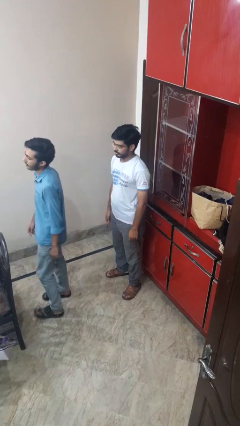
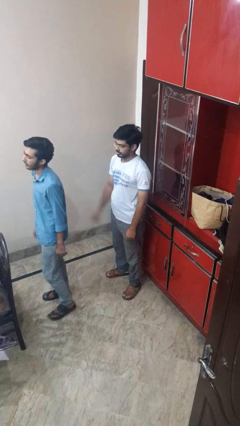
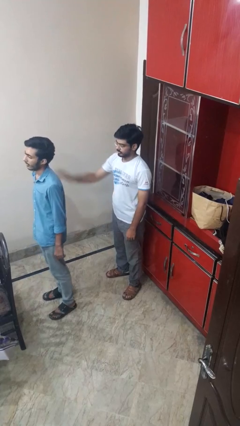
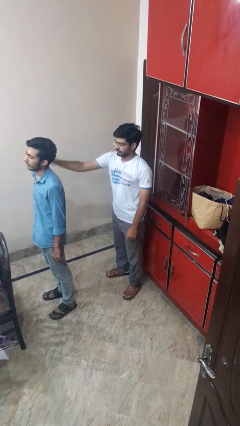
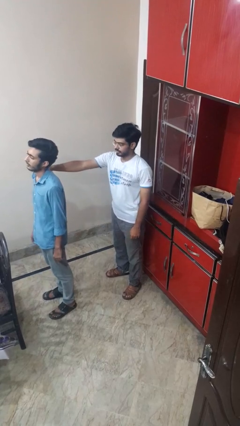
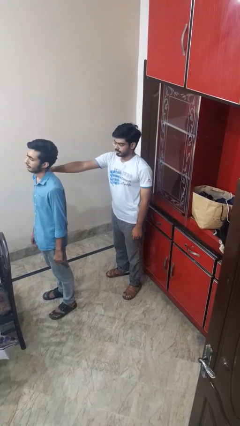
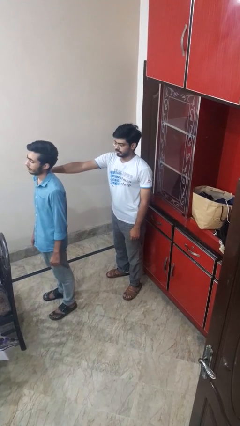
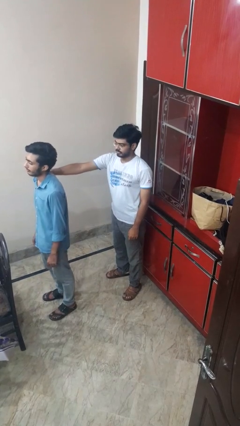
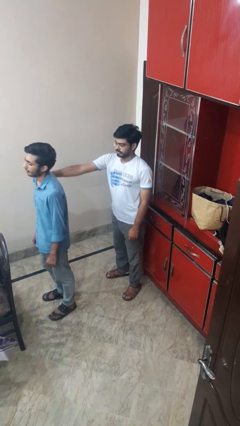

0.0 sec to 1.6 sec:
person grabs person by shoulder

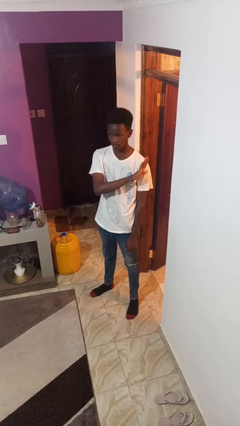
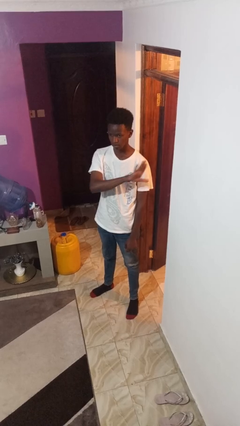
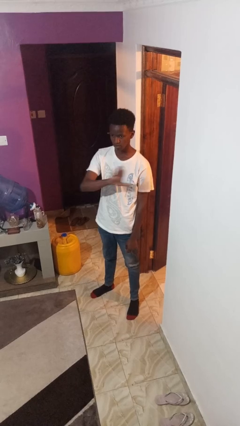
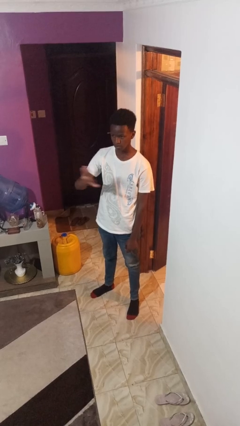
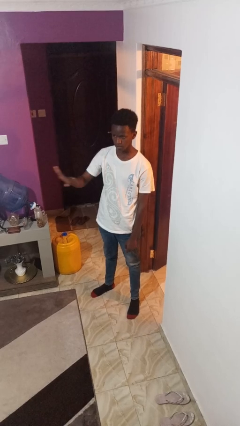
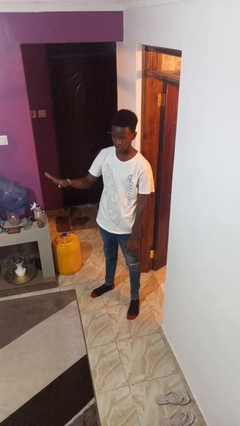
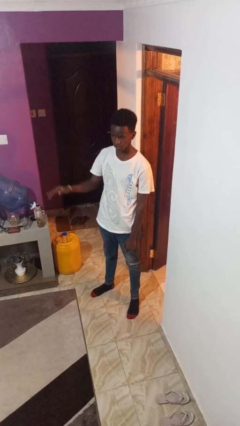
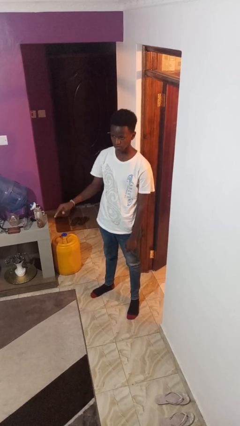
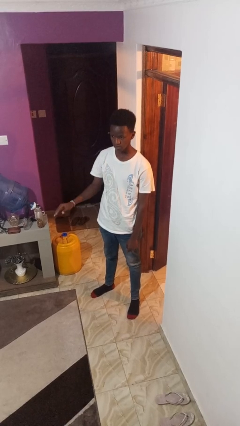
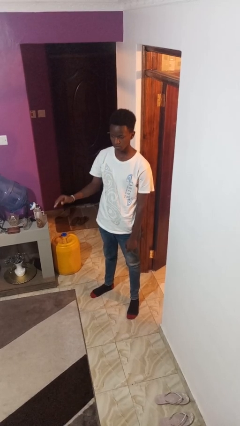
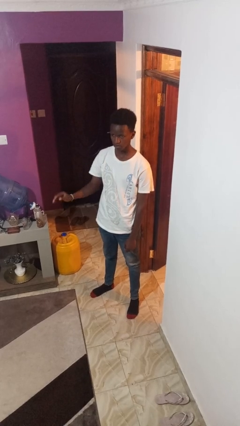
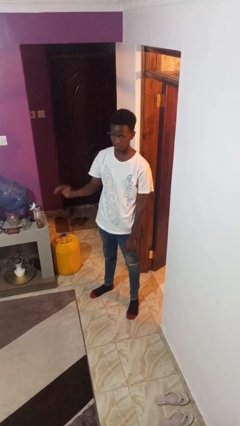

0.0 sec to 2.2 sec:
person gestures swipe right

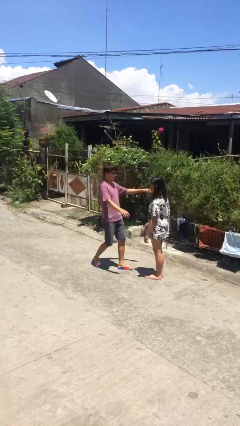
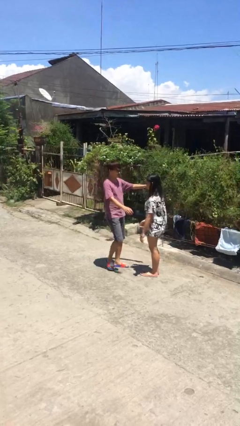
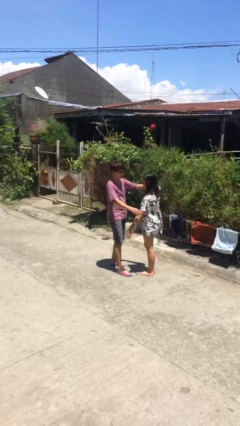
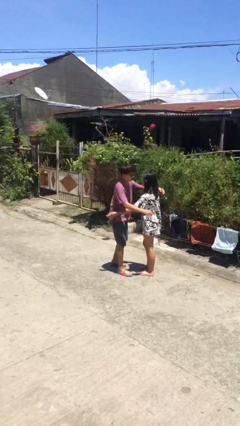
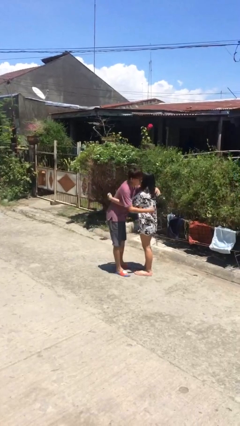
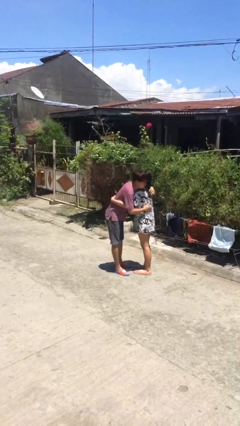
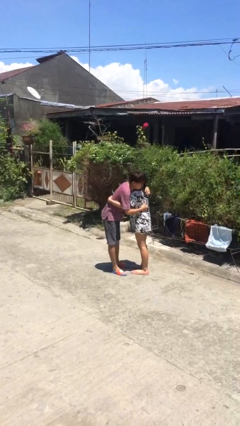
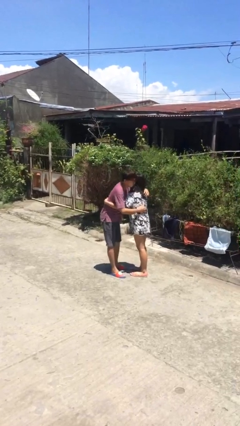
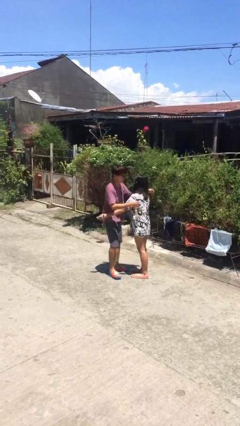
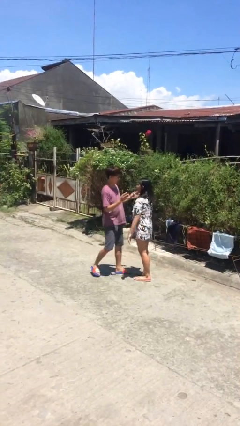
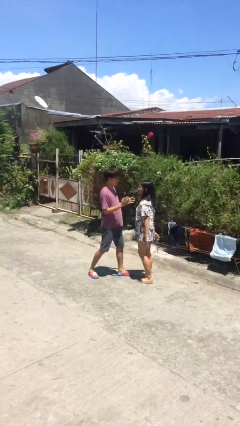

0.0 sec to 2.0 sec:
person embraces person

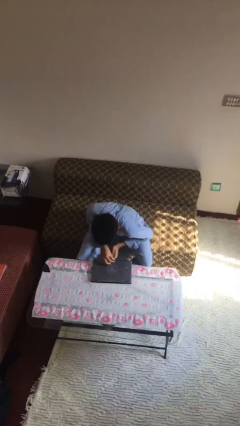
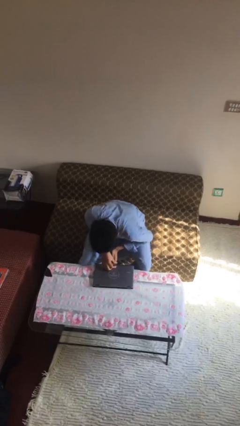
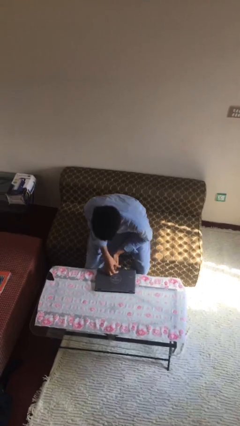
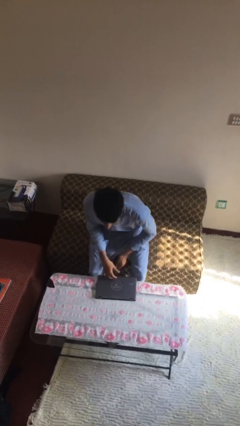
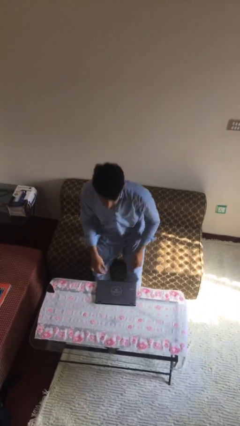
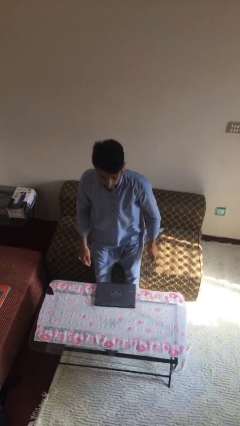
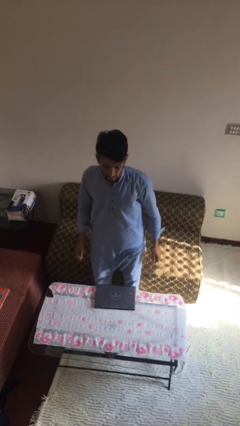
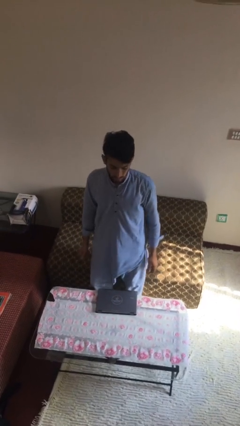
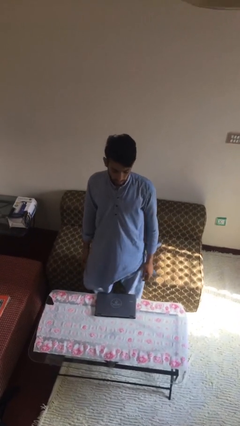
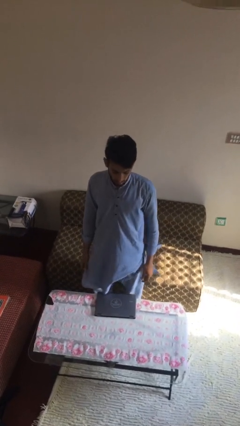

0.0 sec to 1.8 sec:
person stands up

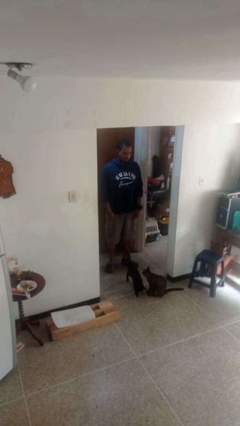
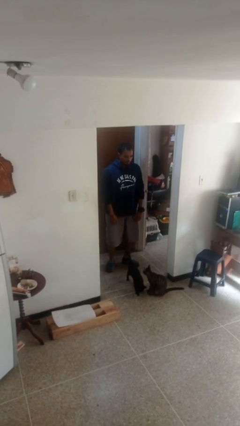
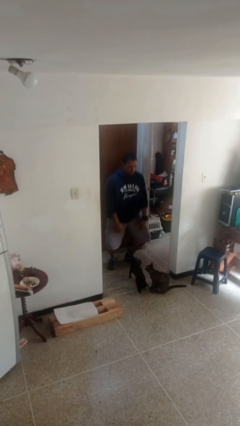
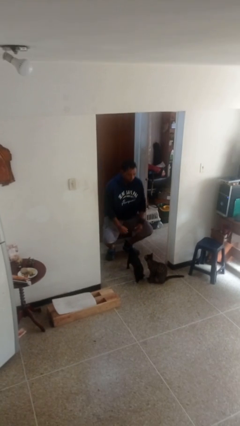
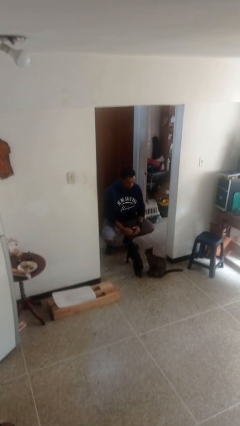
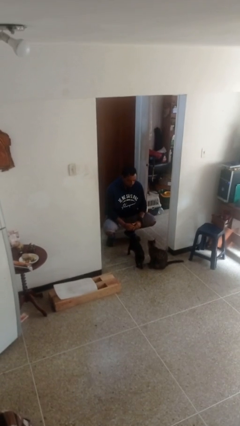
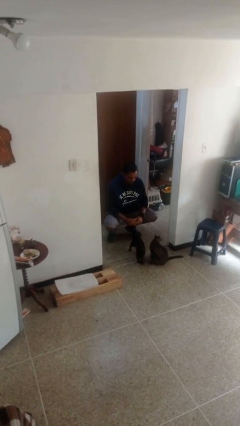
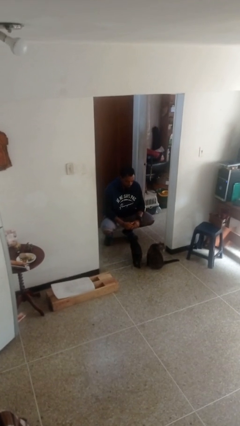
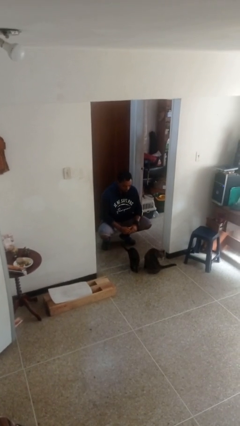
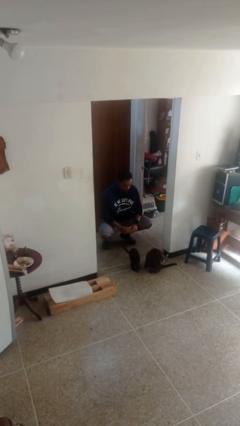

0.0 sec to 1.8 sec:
person squats

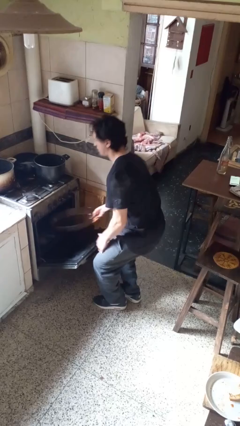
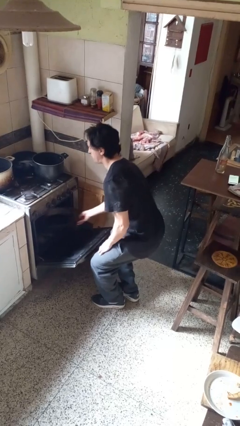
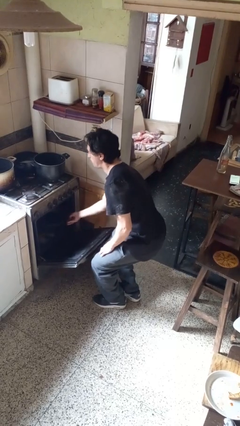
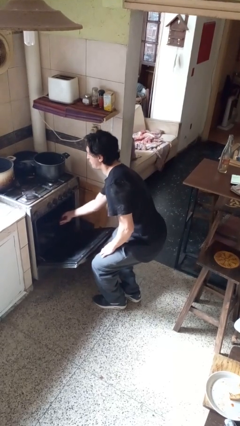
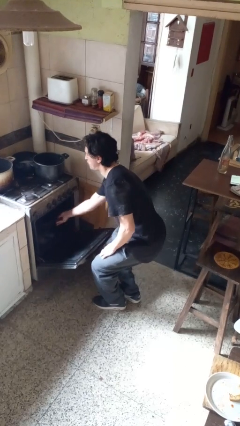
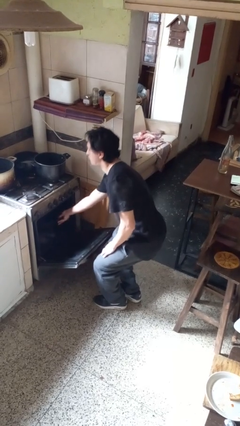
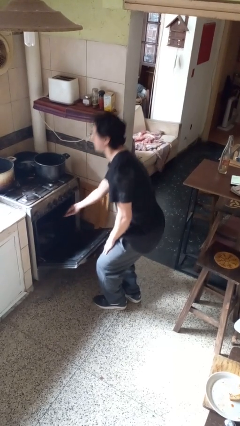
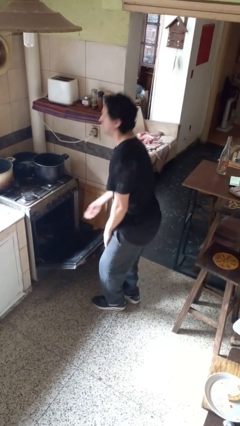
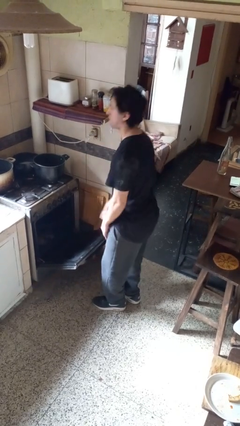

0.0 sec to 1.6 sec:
person puts object into oven

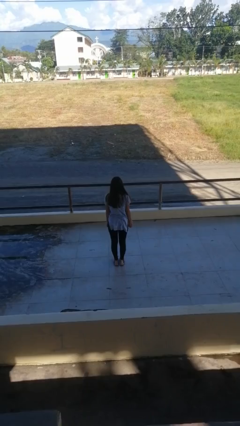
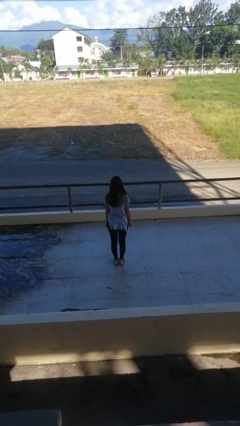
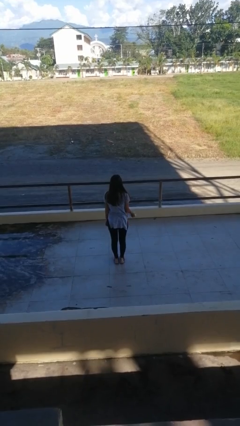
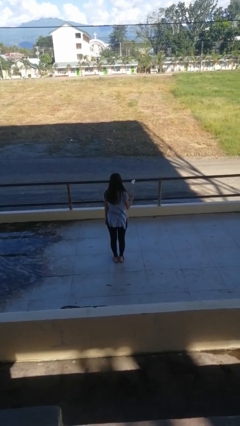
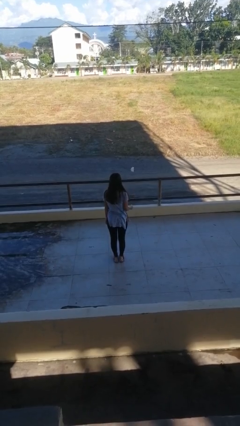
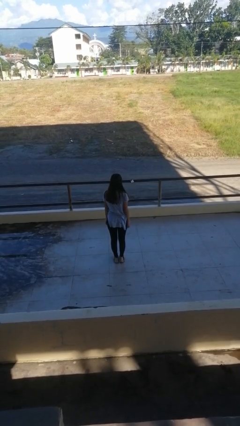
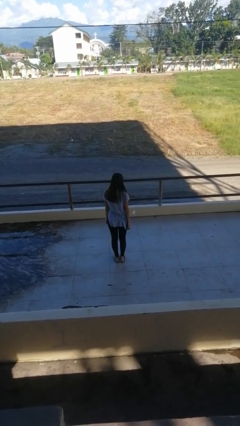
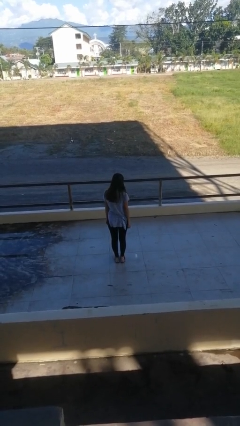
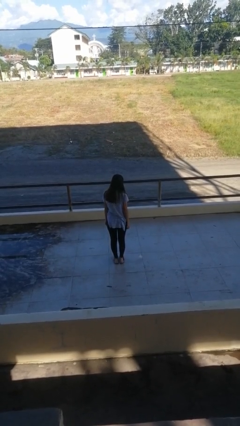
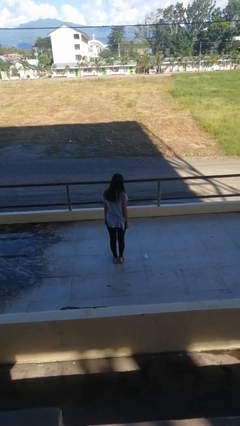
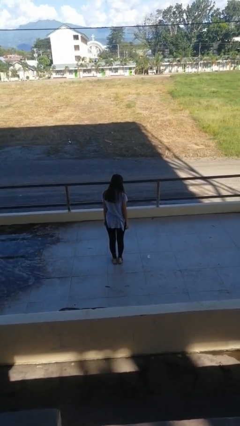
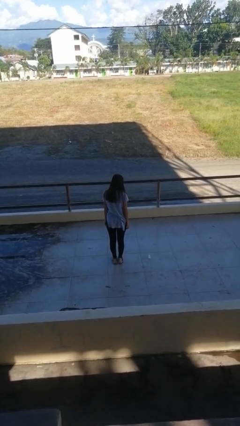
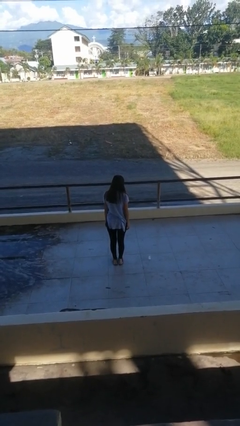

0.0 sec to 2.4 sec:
person throws object into air

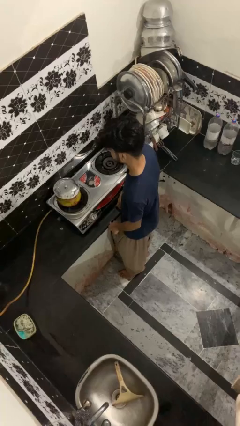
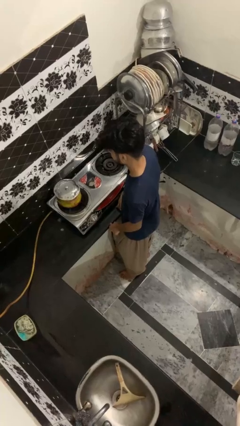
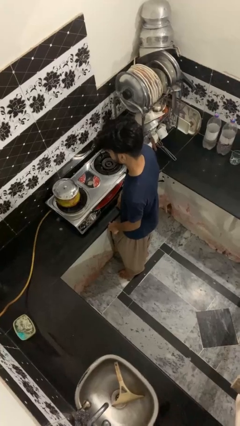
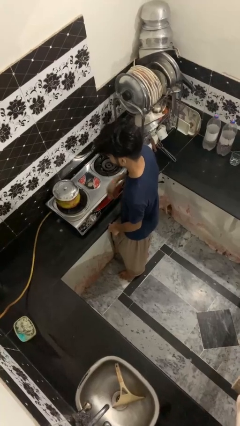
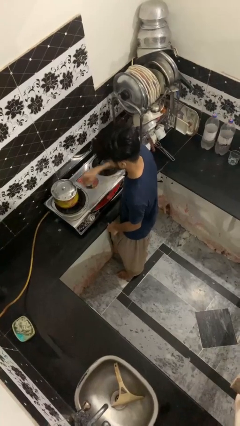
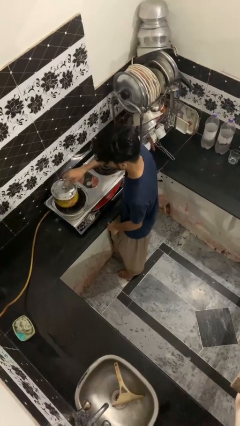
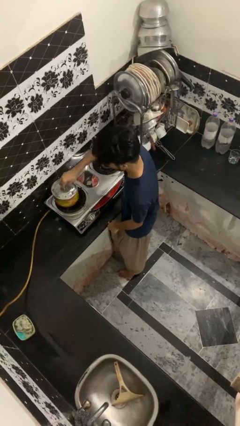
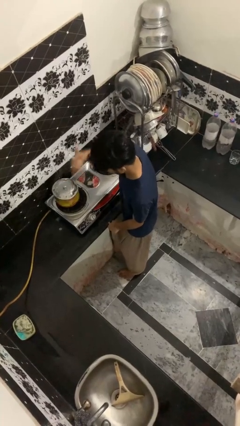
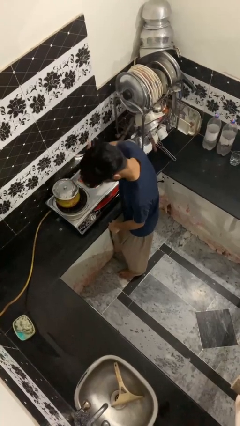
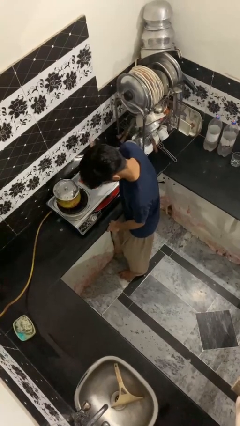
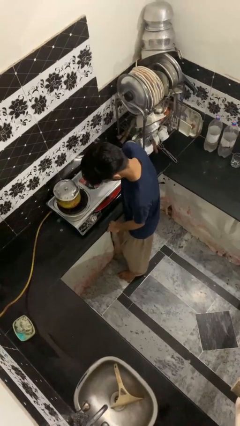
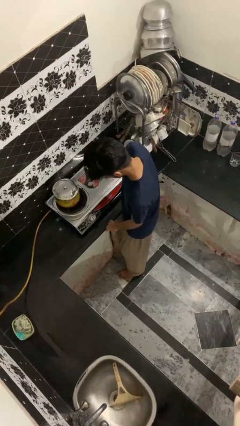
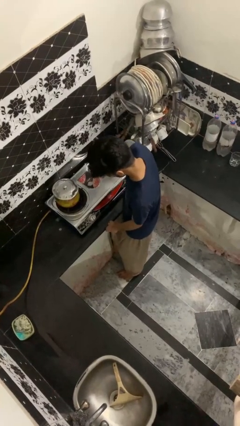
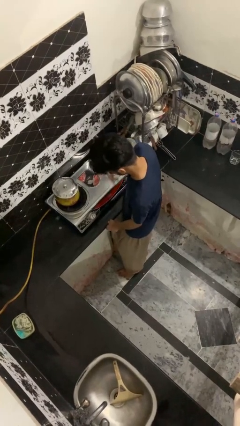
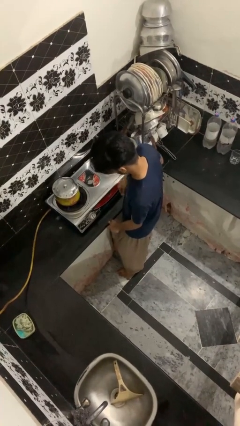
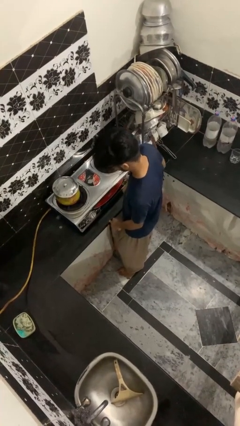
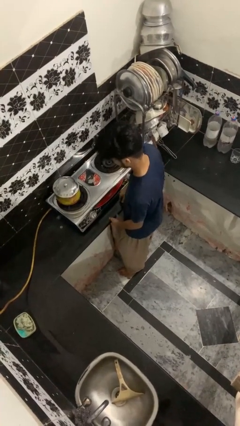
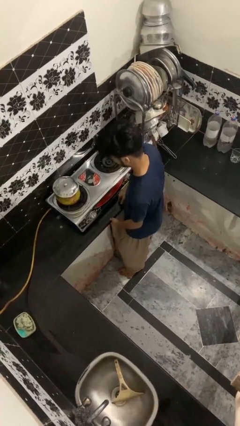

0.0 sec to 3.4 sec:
person burns hand
